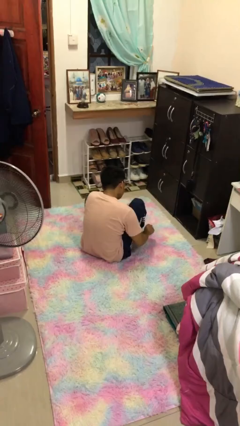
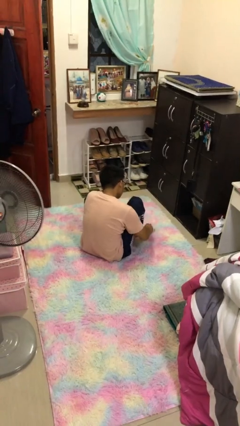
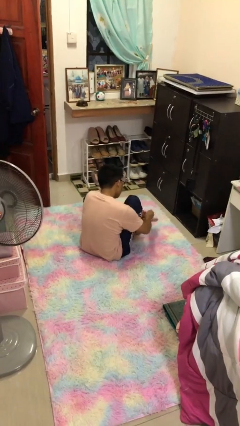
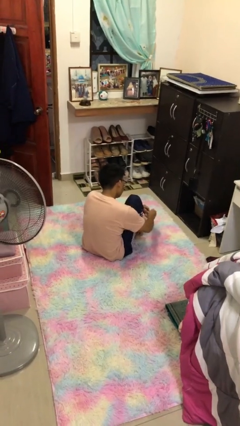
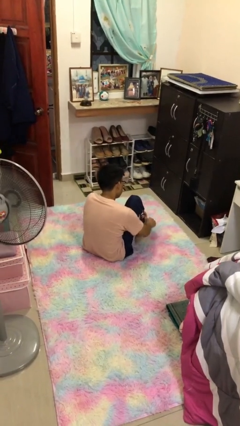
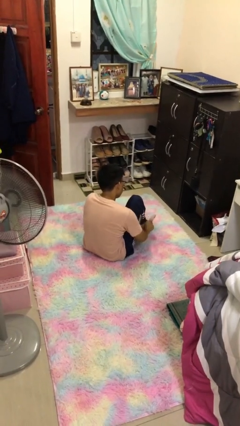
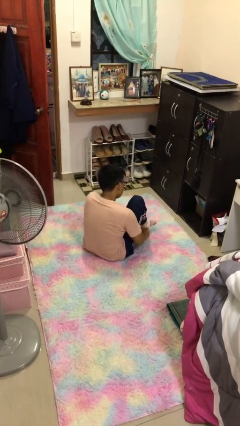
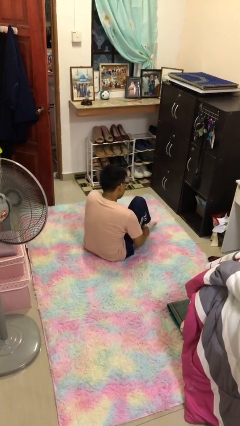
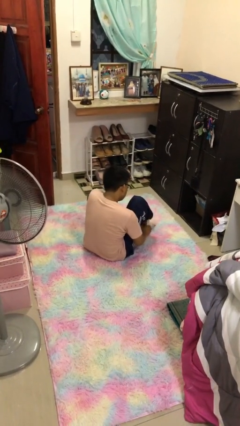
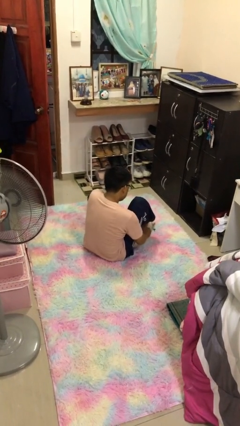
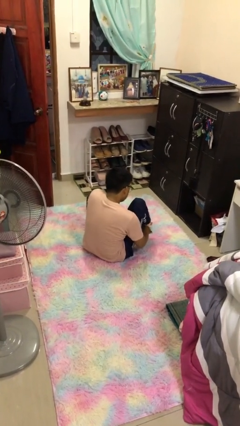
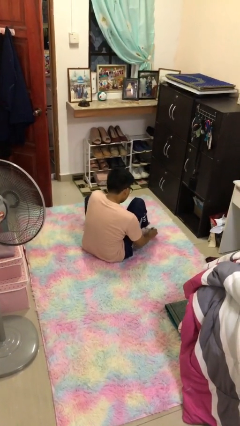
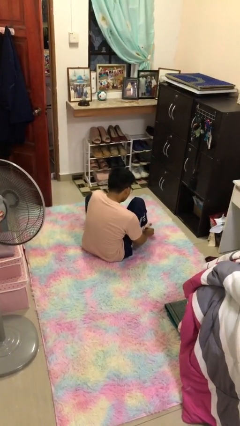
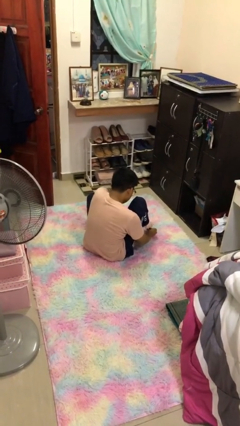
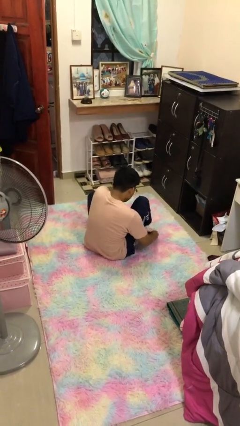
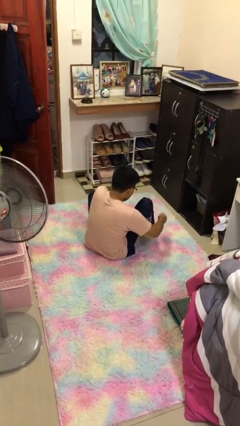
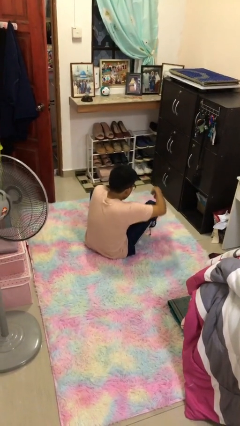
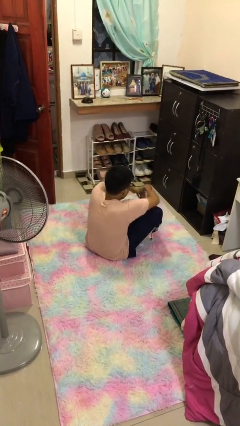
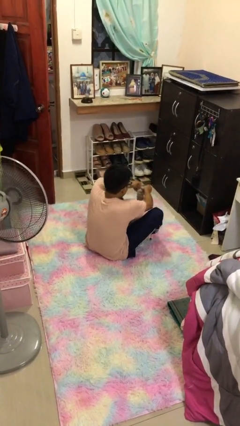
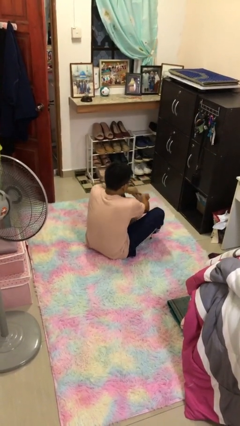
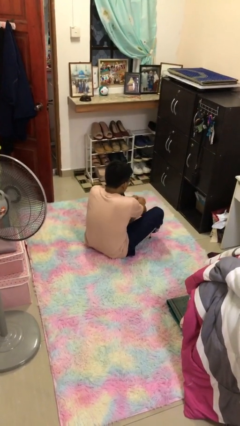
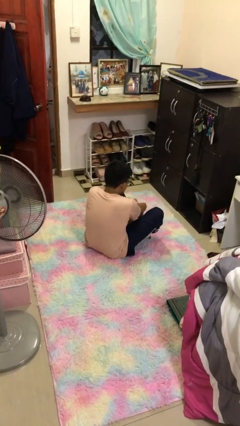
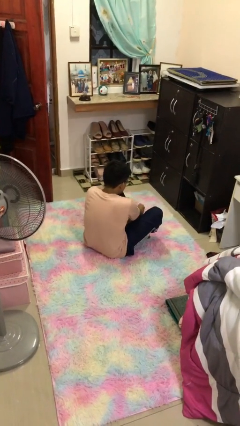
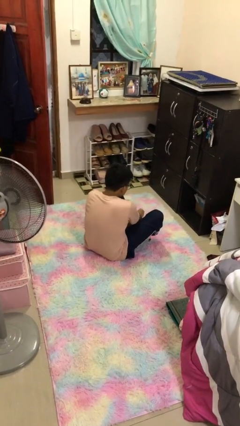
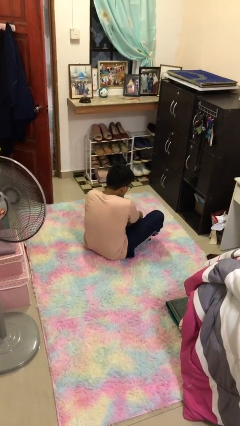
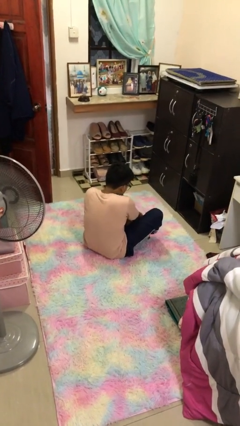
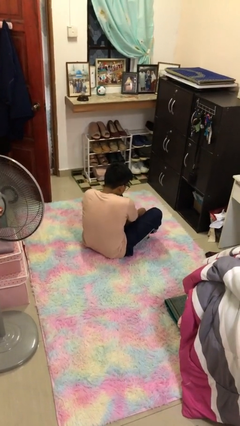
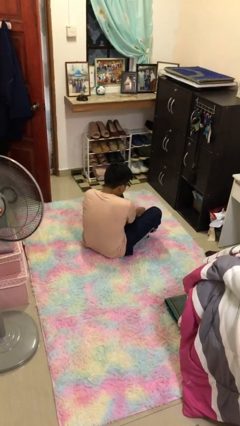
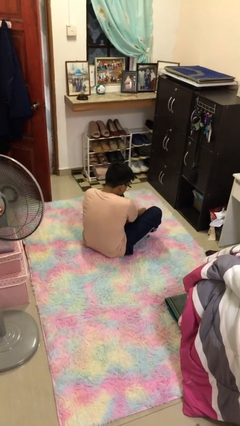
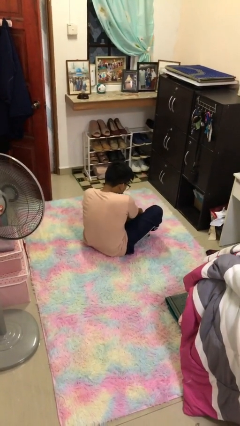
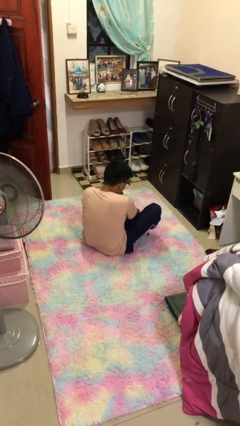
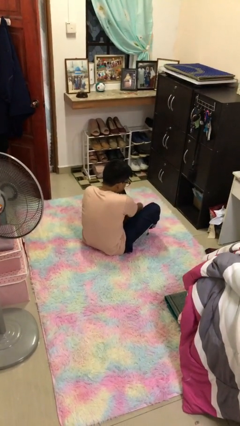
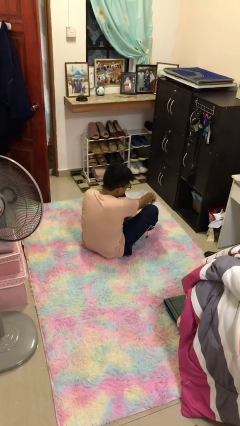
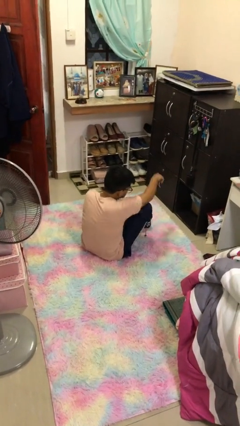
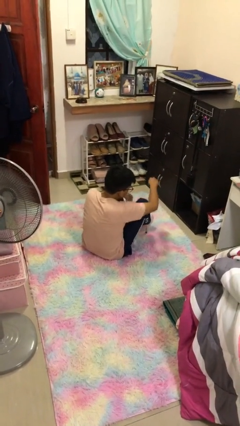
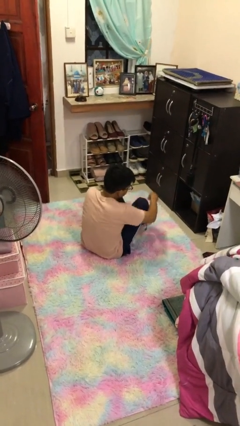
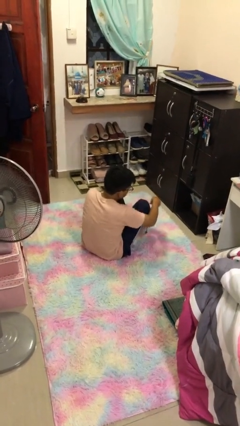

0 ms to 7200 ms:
person puts on socks

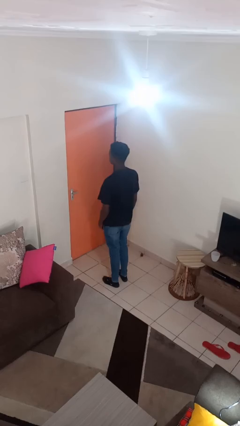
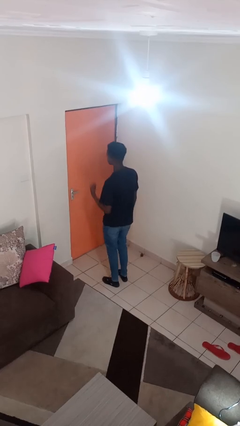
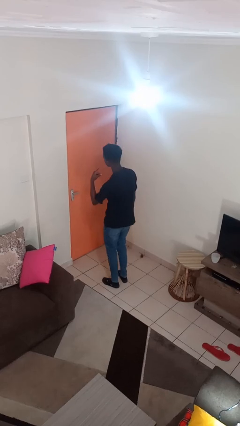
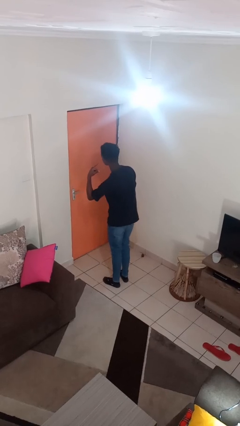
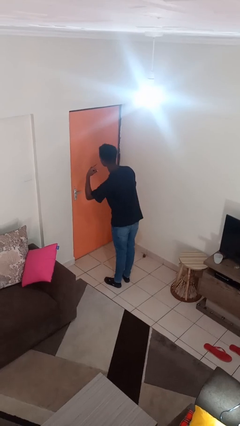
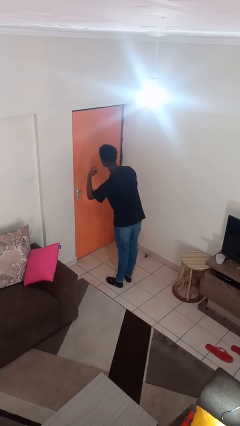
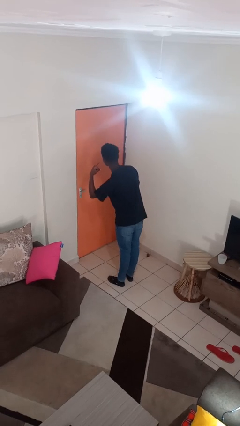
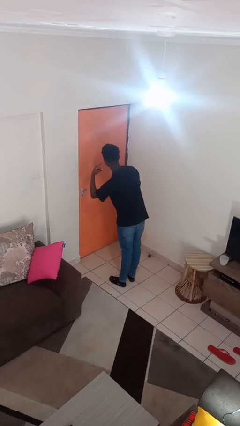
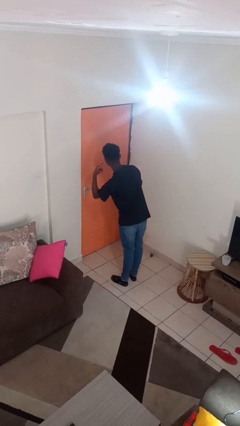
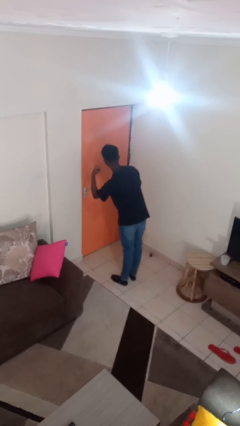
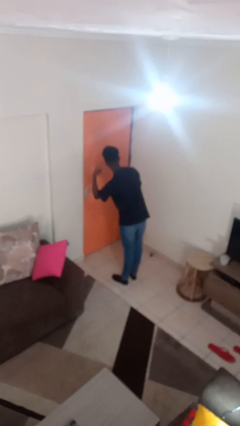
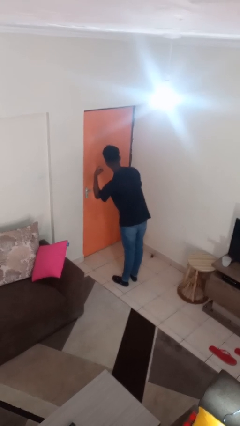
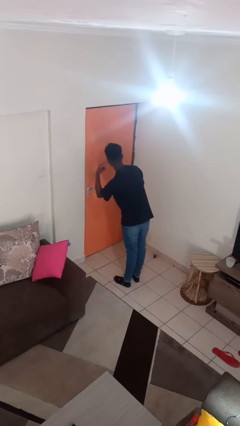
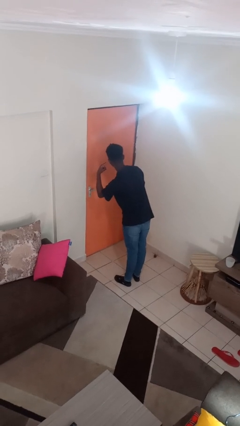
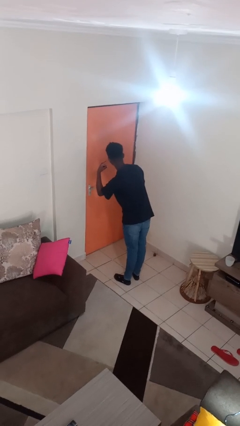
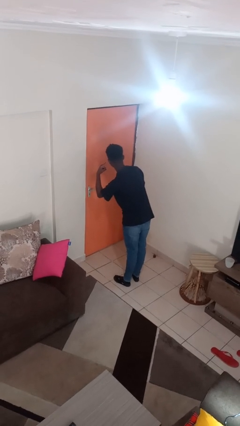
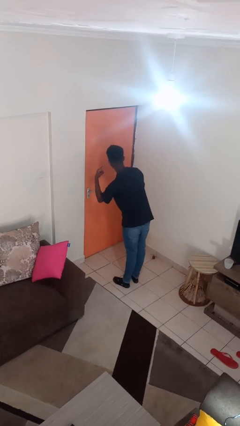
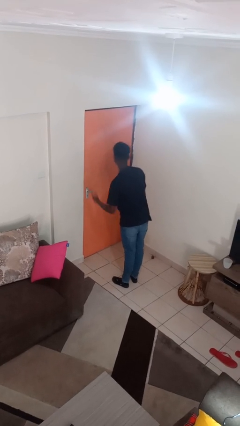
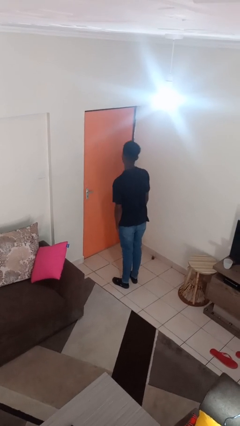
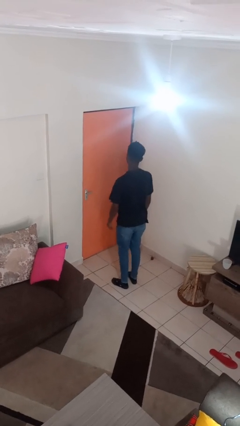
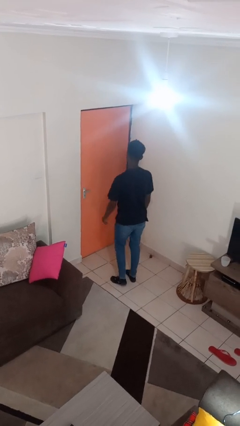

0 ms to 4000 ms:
person gestures listen closely

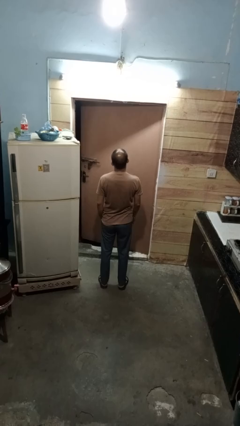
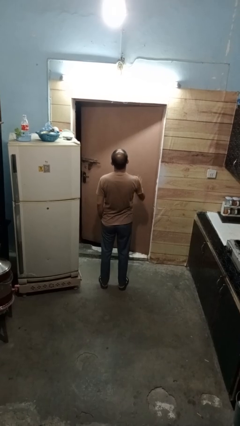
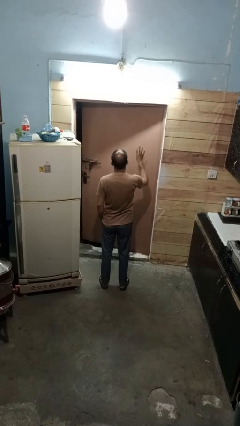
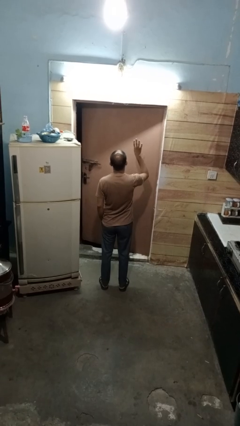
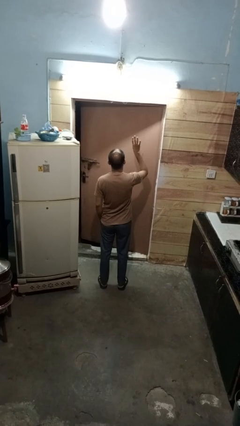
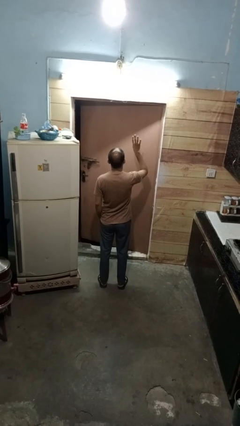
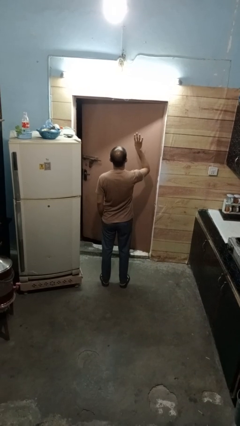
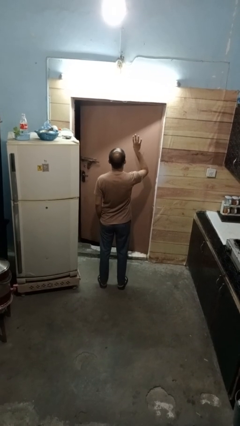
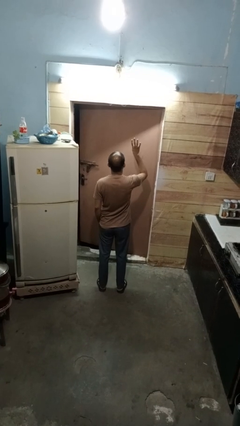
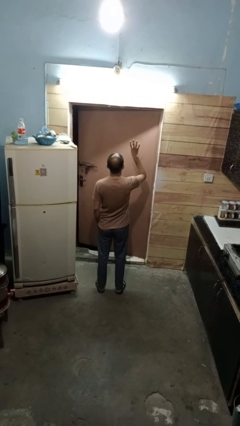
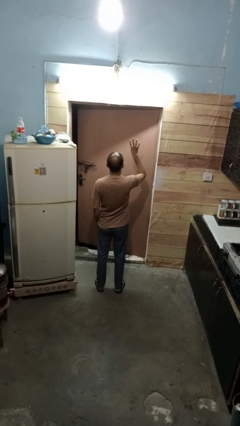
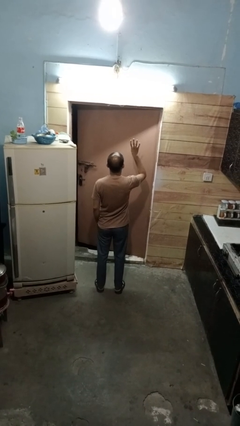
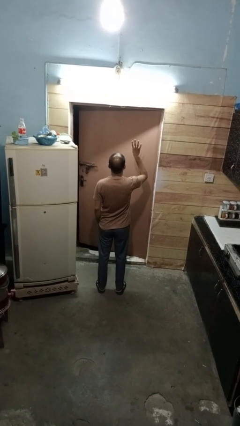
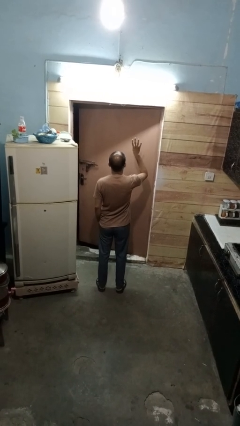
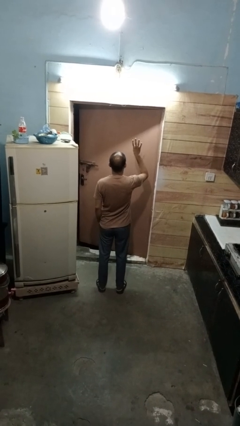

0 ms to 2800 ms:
person gestures number four

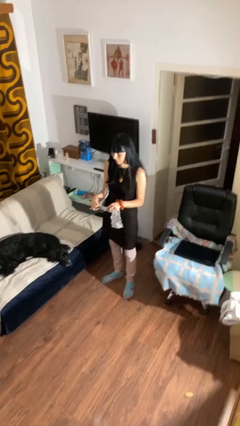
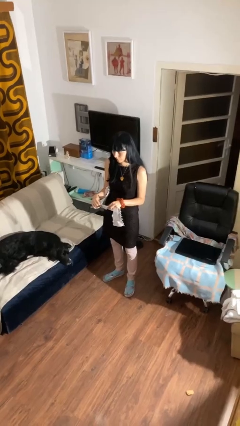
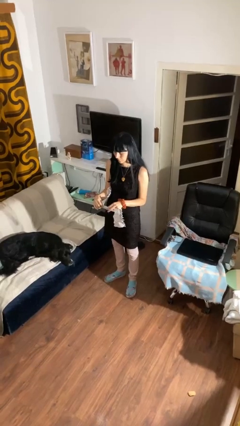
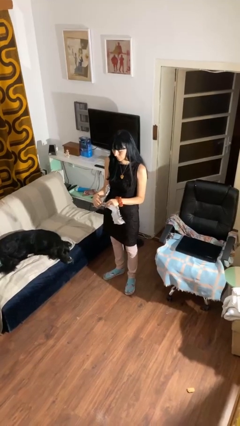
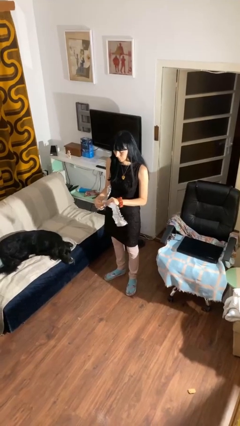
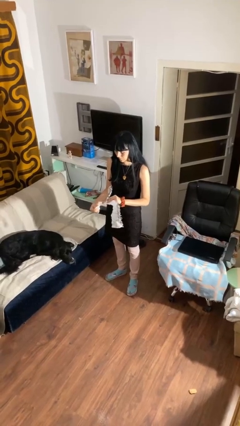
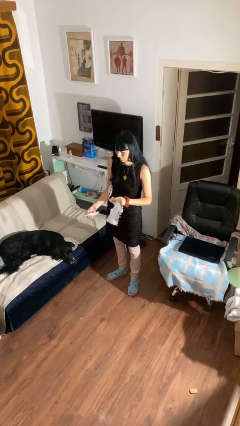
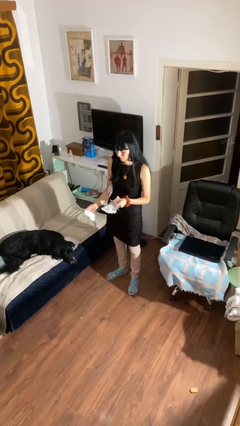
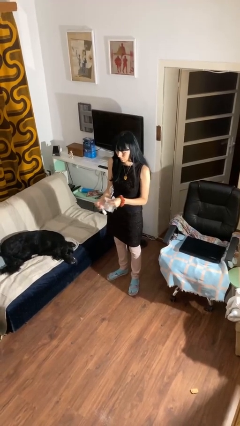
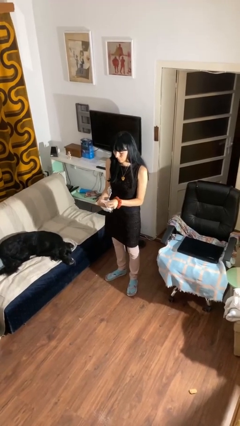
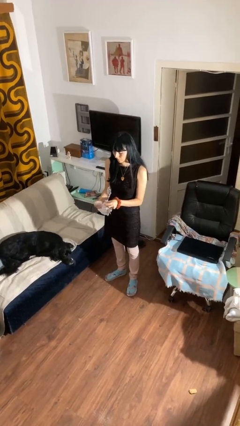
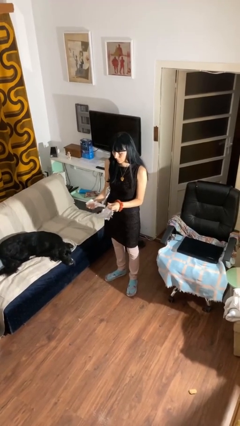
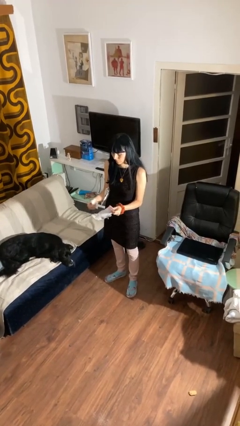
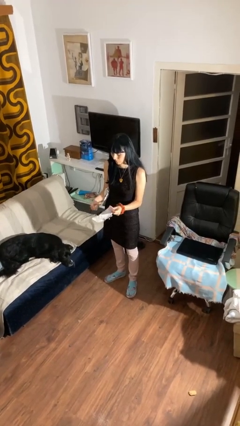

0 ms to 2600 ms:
person tears paper

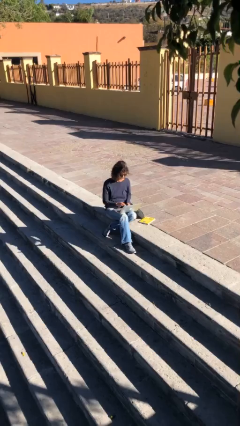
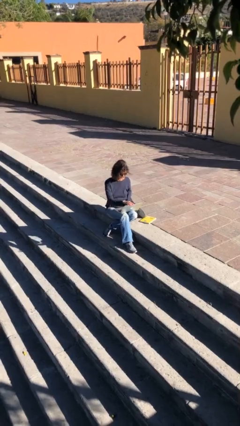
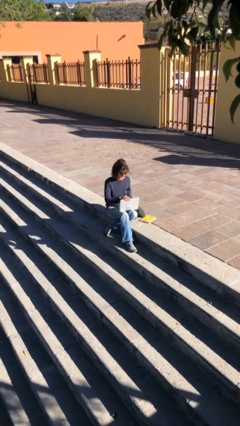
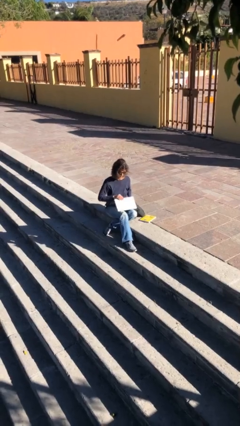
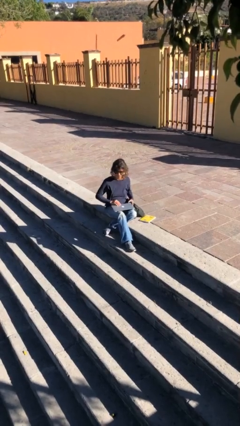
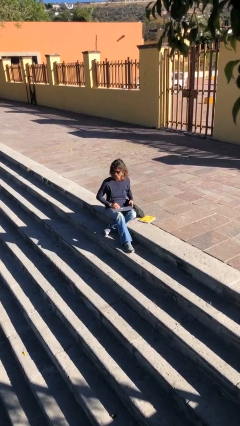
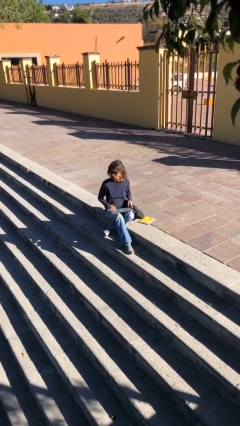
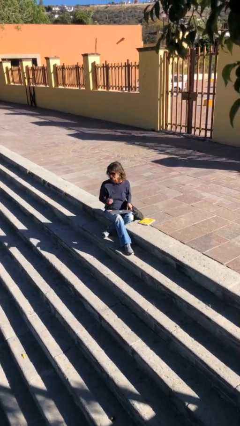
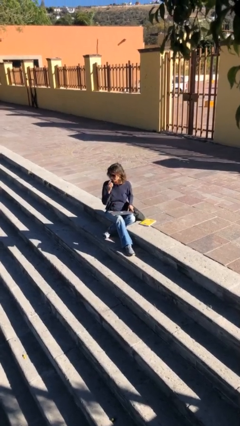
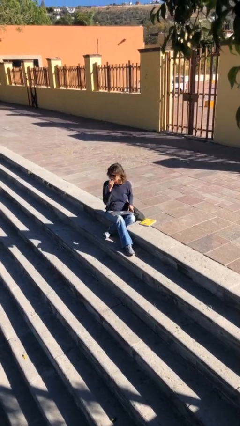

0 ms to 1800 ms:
person interacts with laptop
